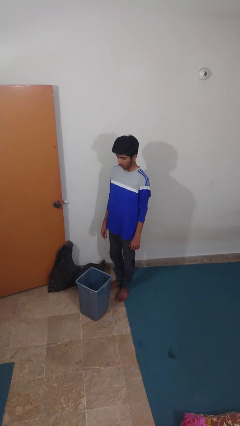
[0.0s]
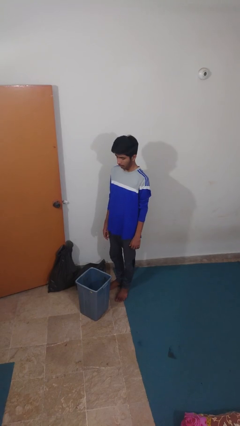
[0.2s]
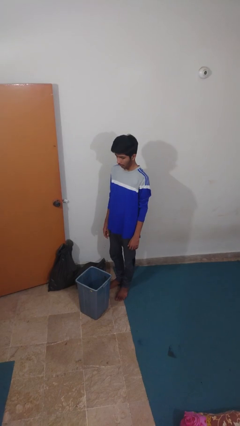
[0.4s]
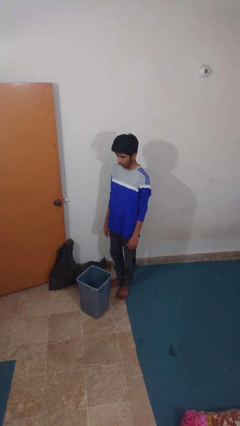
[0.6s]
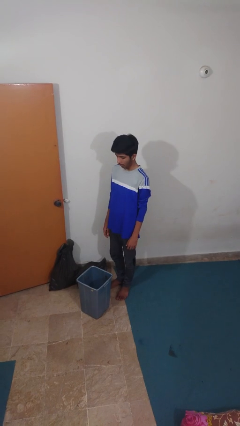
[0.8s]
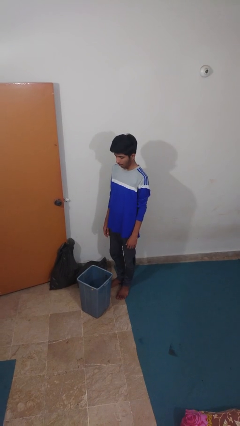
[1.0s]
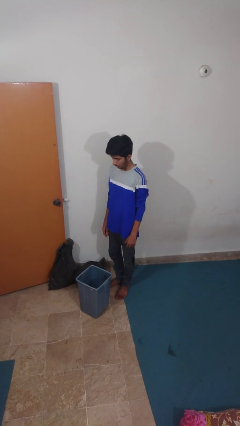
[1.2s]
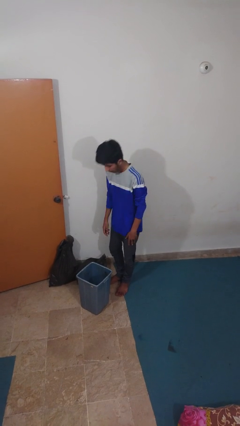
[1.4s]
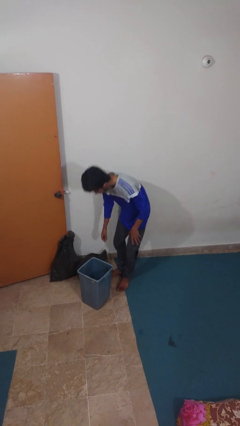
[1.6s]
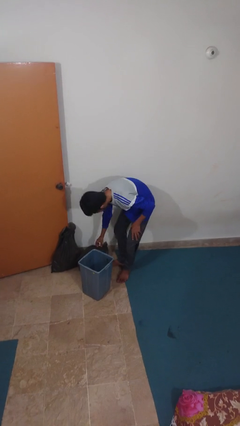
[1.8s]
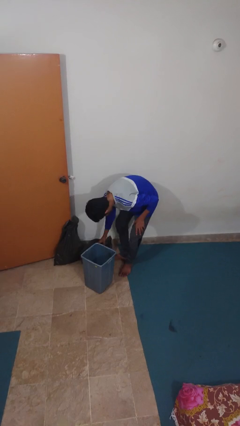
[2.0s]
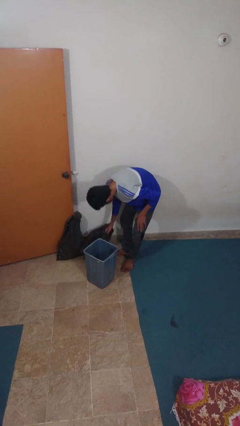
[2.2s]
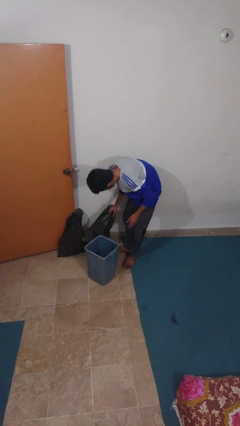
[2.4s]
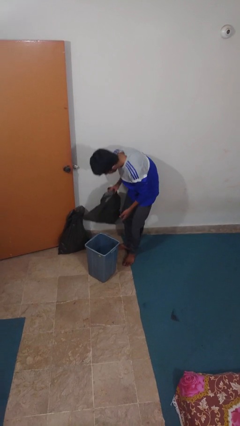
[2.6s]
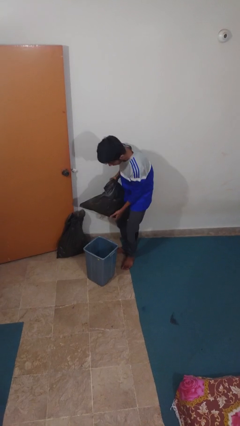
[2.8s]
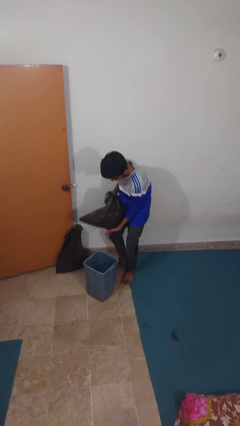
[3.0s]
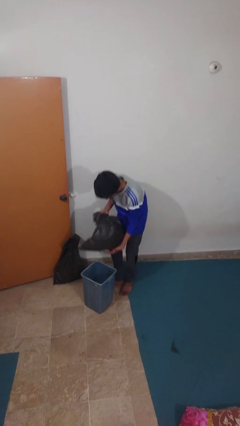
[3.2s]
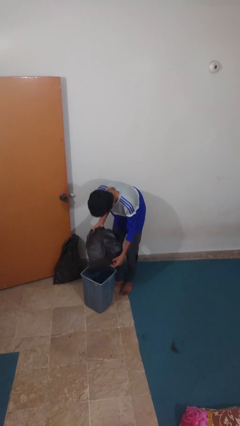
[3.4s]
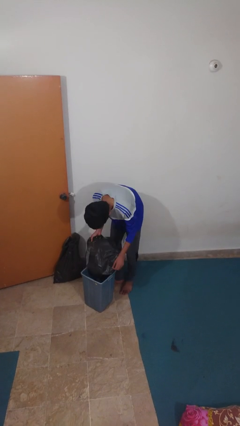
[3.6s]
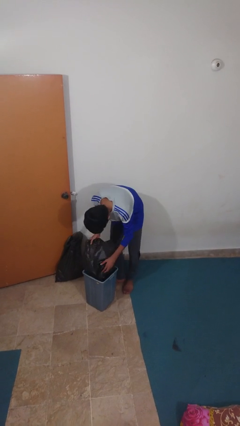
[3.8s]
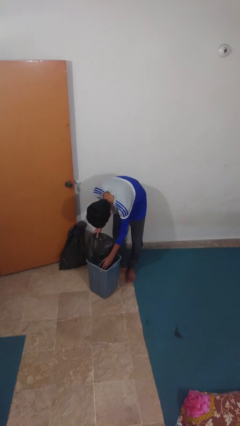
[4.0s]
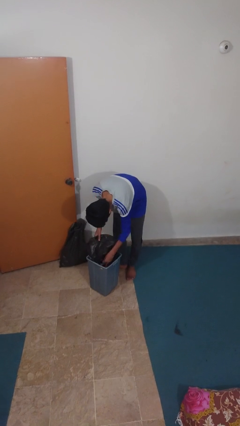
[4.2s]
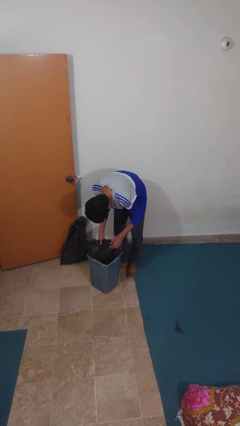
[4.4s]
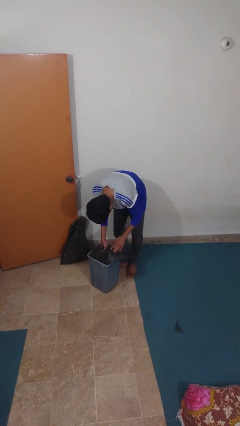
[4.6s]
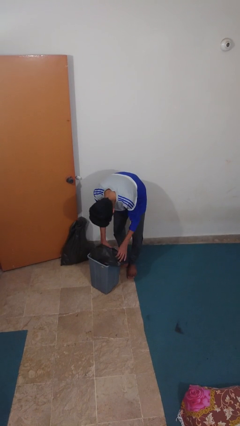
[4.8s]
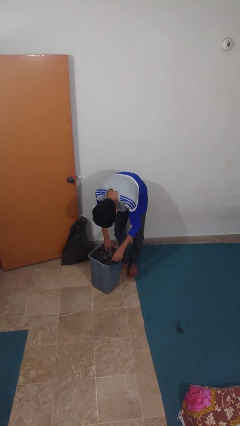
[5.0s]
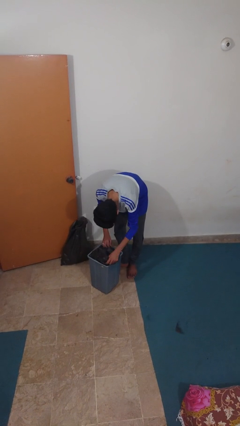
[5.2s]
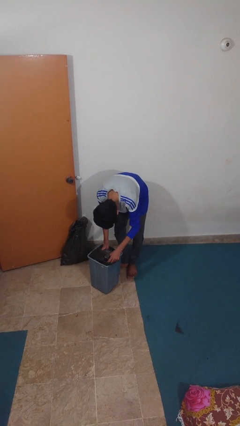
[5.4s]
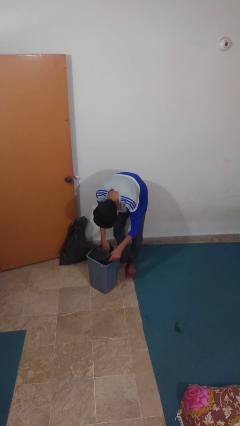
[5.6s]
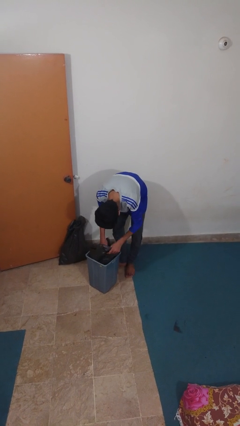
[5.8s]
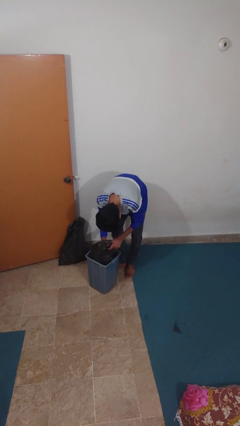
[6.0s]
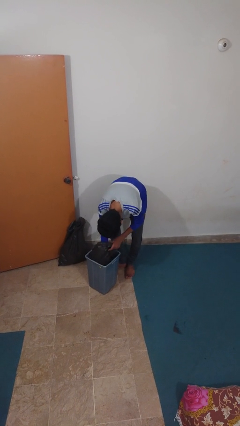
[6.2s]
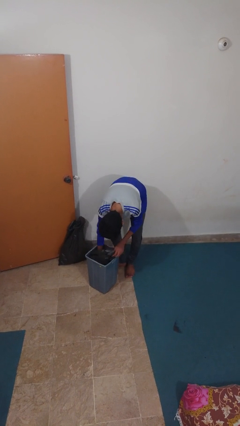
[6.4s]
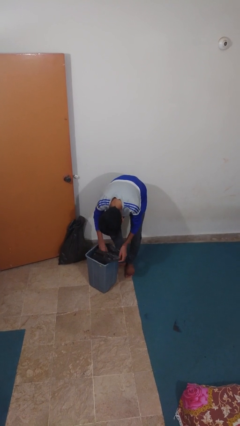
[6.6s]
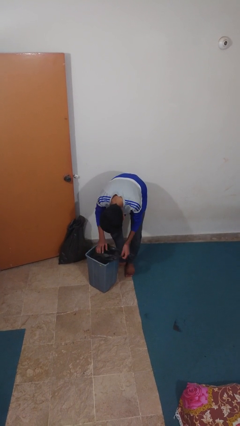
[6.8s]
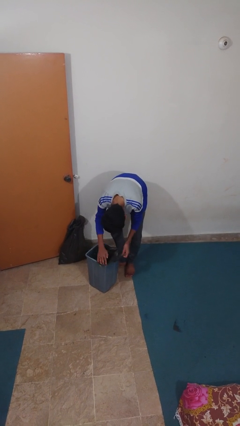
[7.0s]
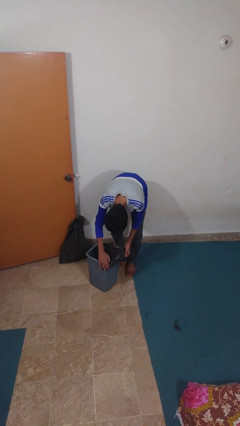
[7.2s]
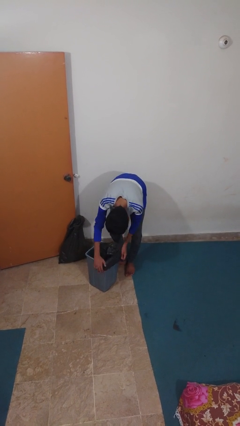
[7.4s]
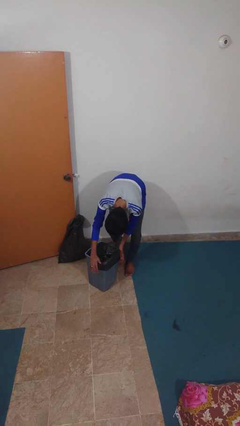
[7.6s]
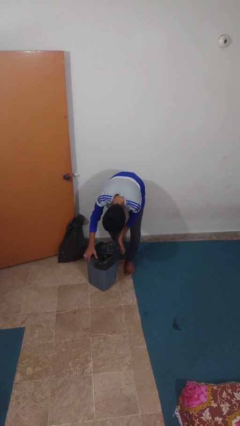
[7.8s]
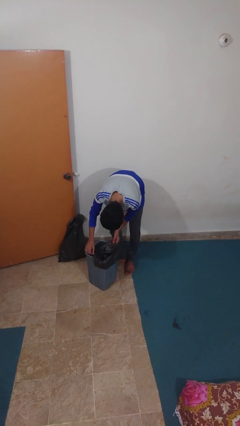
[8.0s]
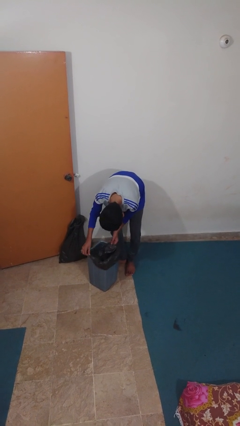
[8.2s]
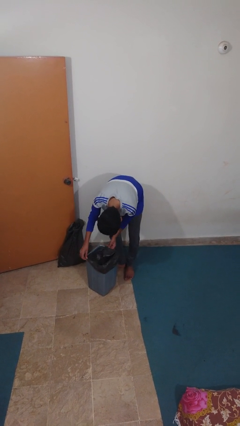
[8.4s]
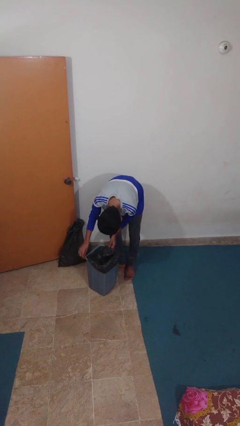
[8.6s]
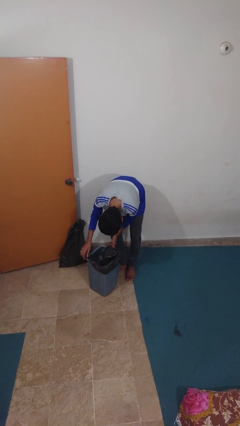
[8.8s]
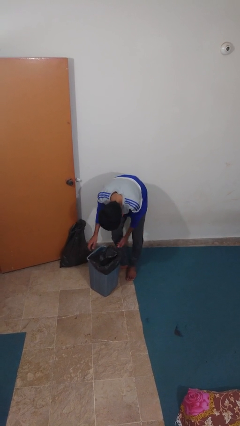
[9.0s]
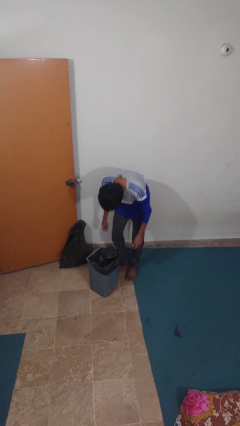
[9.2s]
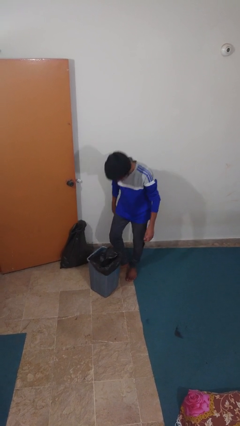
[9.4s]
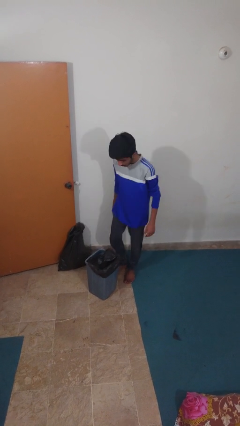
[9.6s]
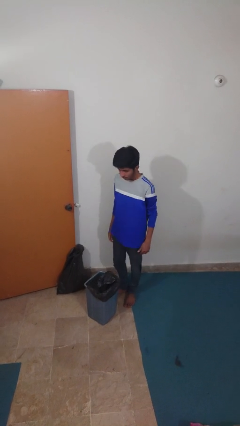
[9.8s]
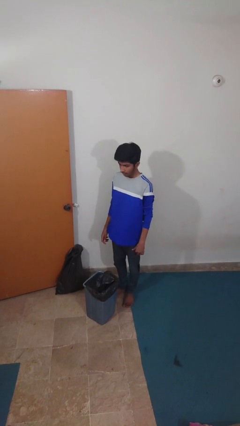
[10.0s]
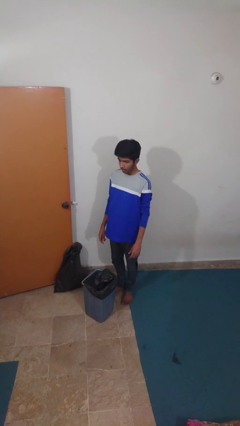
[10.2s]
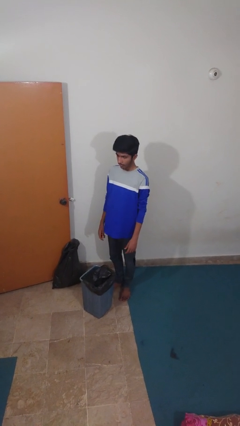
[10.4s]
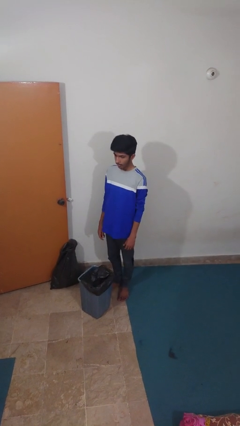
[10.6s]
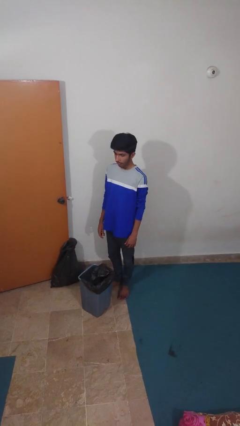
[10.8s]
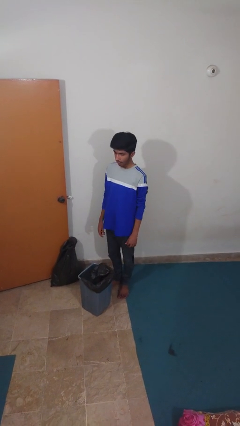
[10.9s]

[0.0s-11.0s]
person inserts trashbag into trashcan

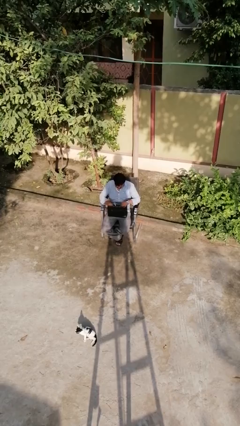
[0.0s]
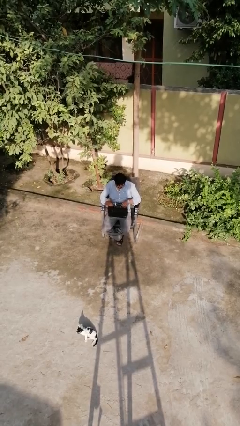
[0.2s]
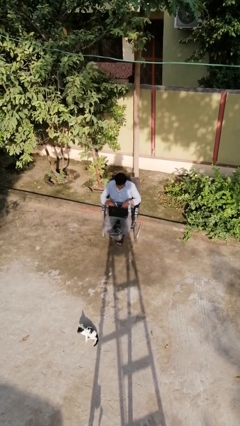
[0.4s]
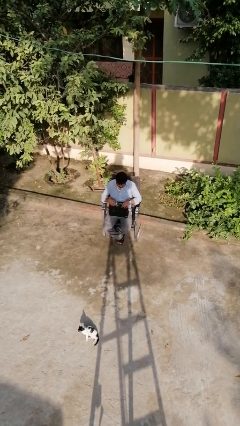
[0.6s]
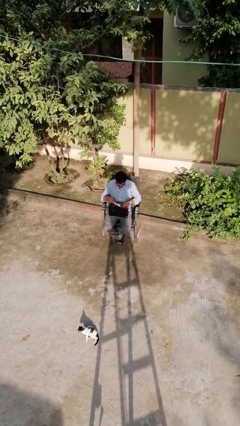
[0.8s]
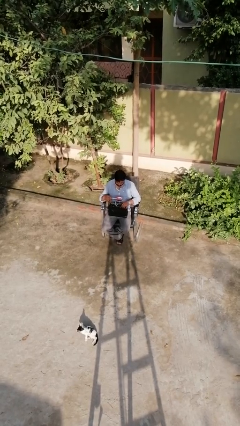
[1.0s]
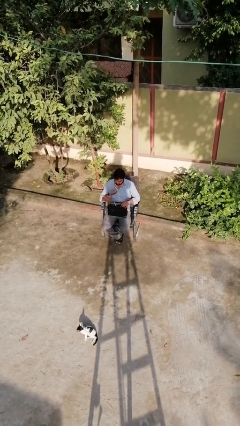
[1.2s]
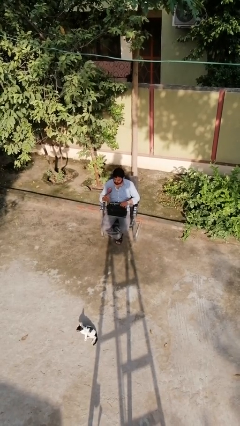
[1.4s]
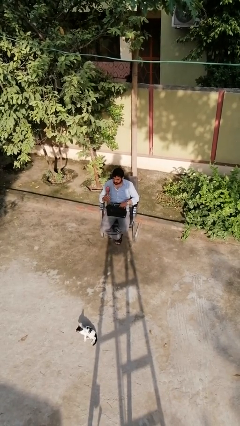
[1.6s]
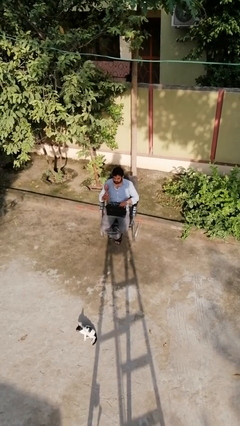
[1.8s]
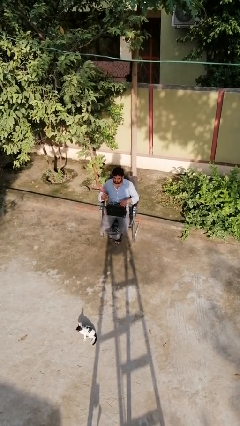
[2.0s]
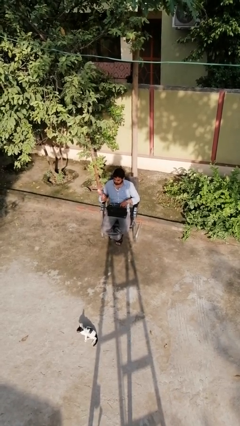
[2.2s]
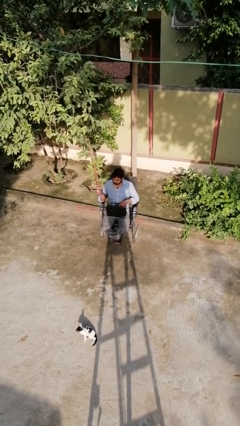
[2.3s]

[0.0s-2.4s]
person takes object from backpack

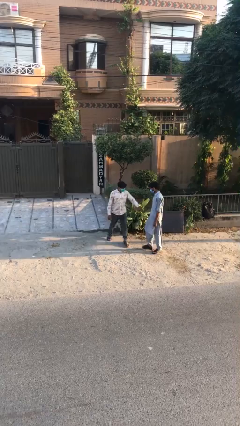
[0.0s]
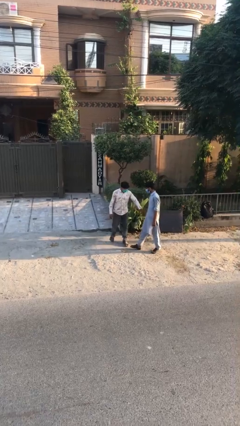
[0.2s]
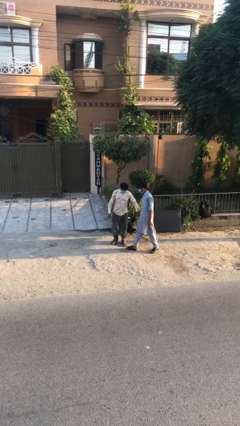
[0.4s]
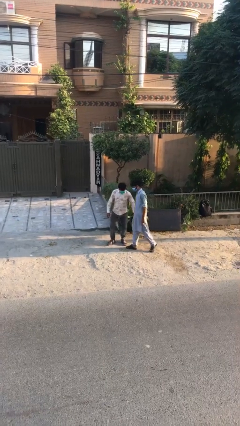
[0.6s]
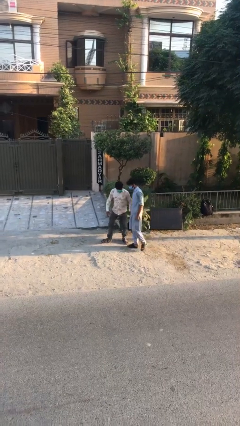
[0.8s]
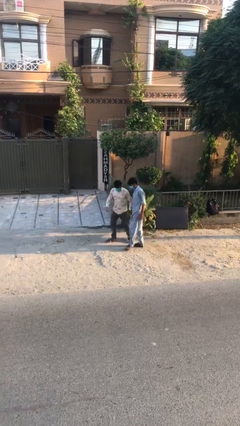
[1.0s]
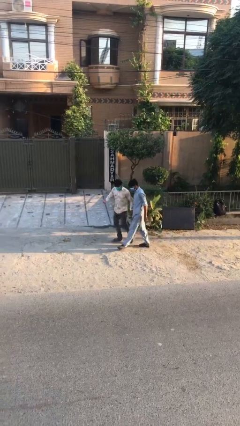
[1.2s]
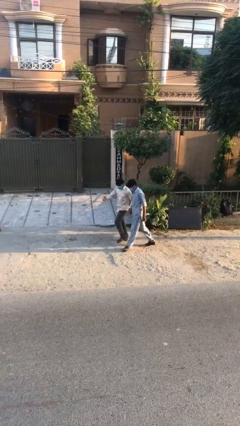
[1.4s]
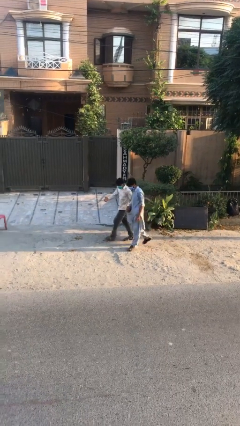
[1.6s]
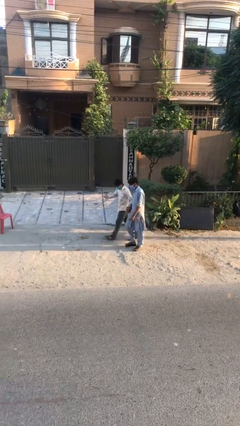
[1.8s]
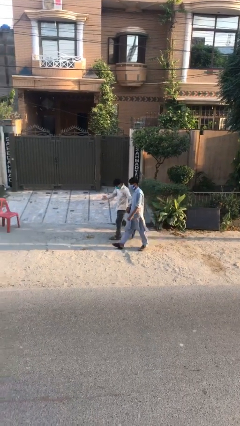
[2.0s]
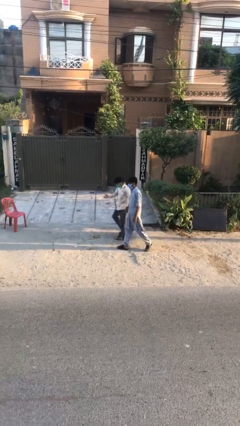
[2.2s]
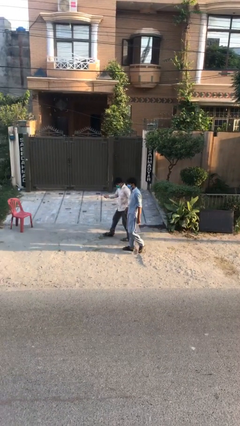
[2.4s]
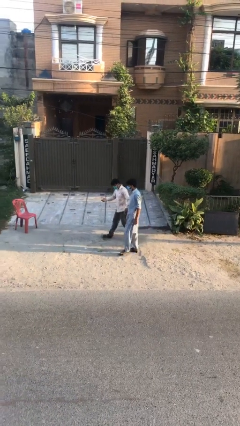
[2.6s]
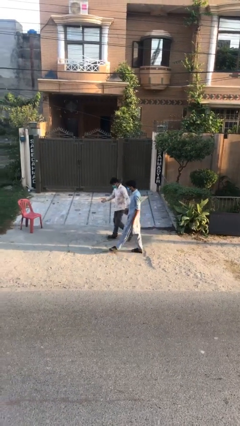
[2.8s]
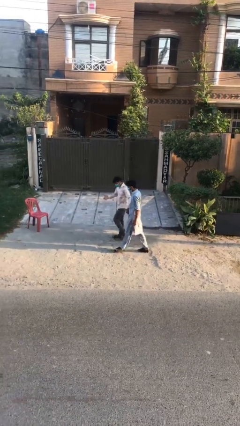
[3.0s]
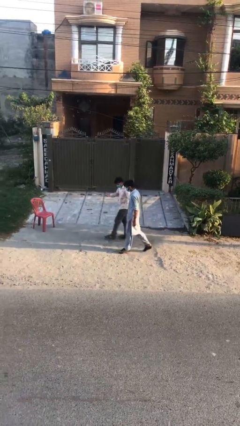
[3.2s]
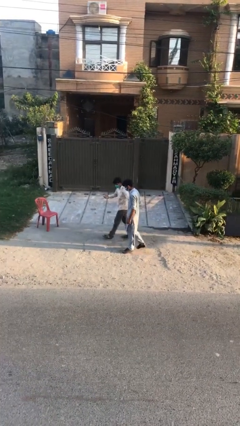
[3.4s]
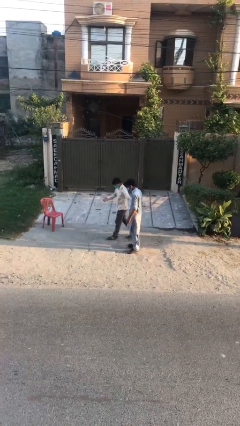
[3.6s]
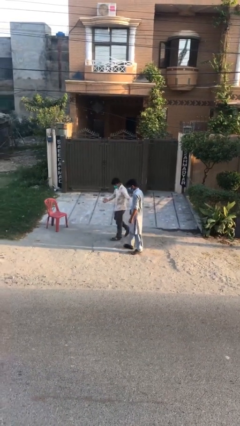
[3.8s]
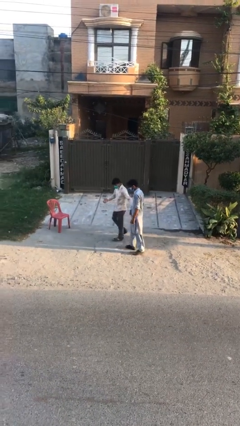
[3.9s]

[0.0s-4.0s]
person holds hand

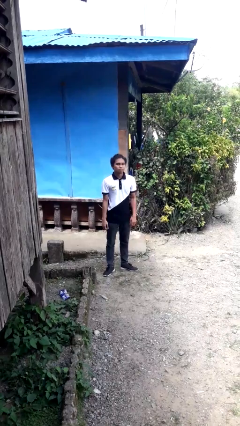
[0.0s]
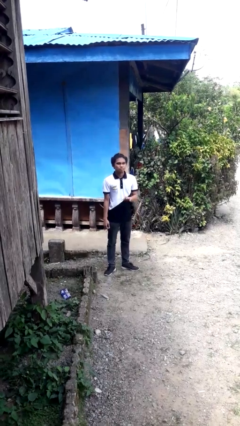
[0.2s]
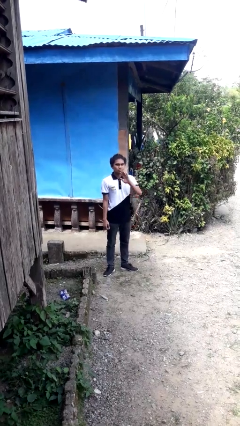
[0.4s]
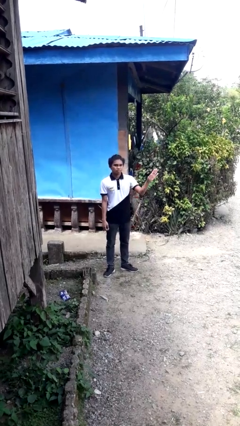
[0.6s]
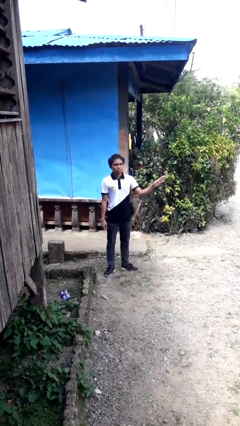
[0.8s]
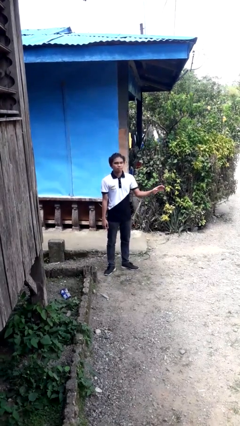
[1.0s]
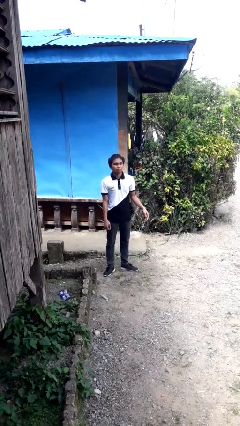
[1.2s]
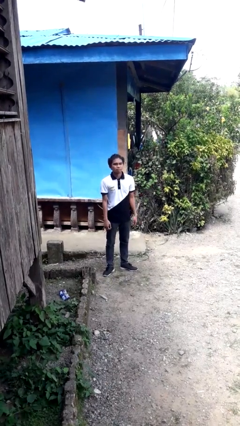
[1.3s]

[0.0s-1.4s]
person gestures swipe left
